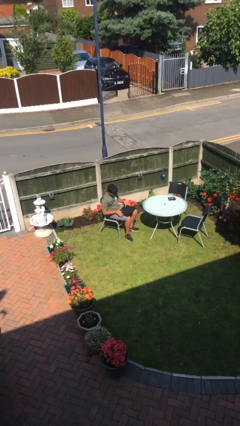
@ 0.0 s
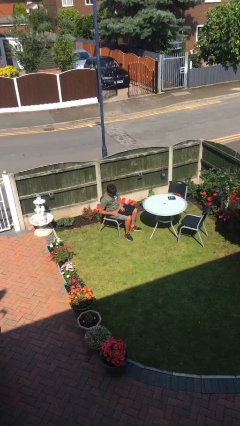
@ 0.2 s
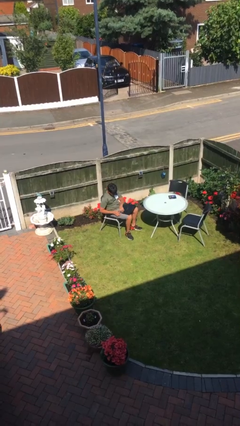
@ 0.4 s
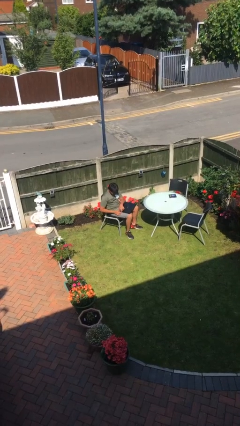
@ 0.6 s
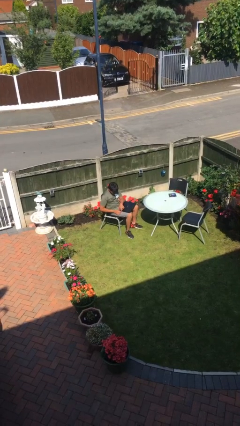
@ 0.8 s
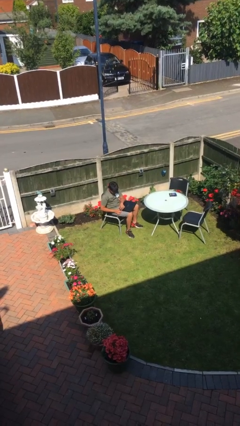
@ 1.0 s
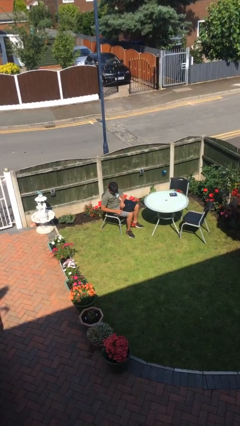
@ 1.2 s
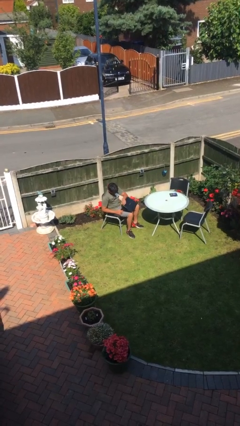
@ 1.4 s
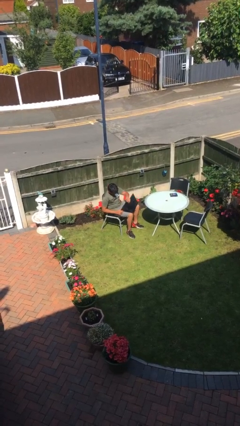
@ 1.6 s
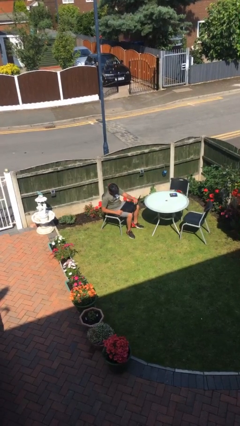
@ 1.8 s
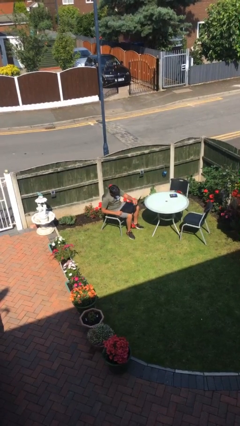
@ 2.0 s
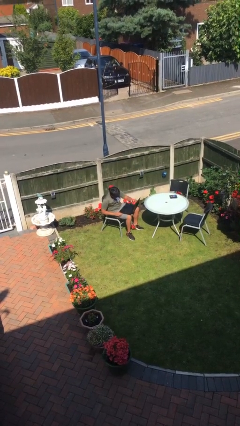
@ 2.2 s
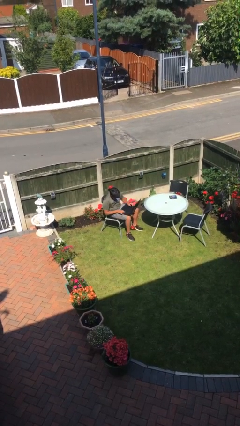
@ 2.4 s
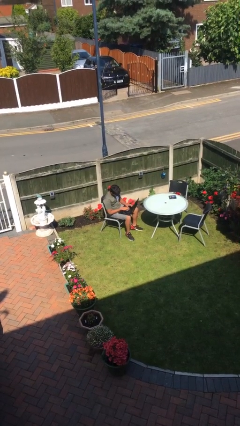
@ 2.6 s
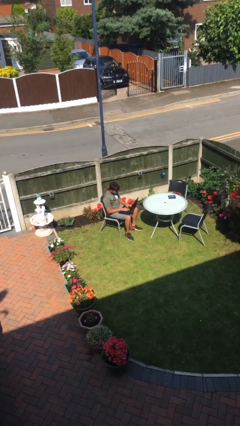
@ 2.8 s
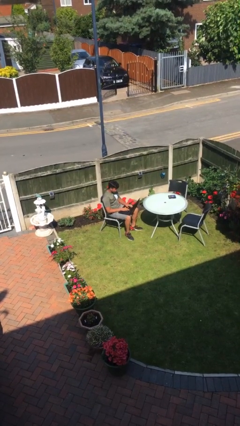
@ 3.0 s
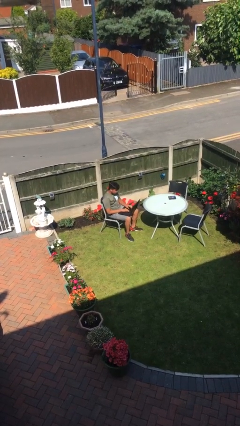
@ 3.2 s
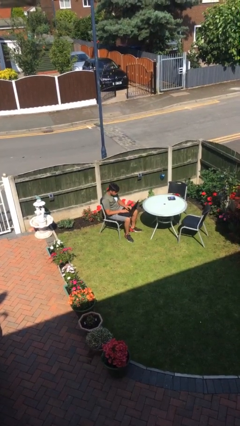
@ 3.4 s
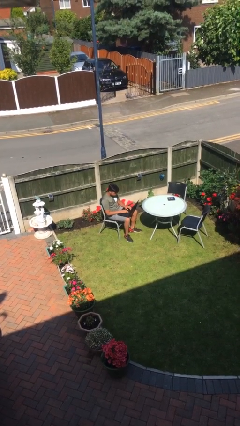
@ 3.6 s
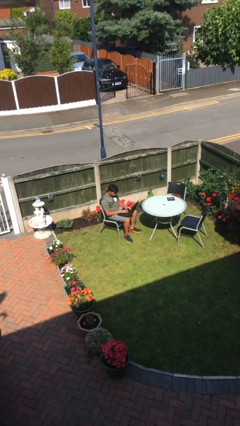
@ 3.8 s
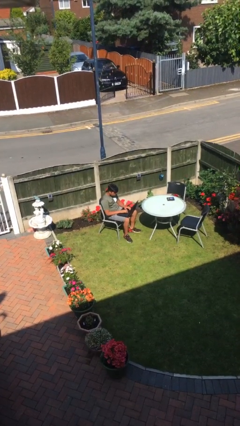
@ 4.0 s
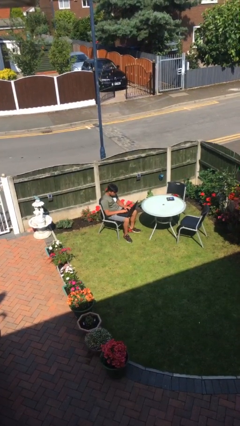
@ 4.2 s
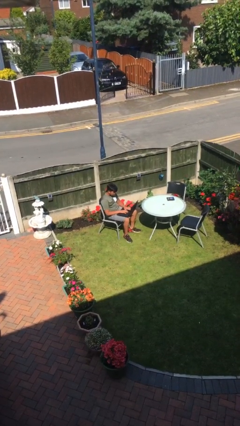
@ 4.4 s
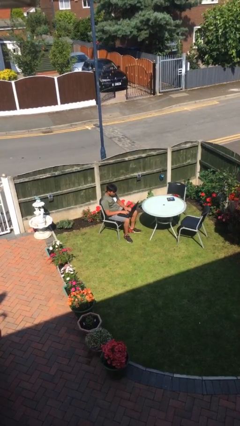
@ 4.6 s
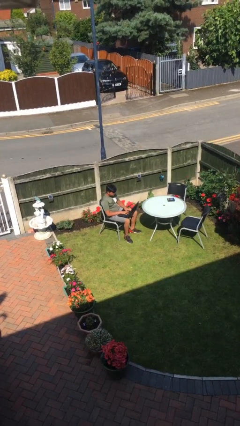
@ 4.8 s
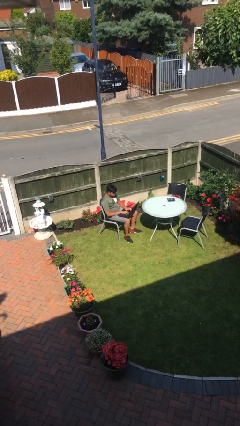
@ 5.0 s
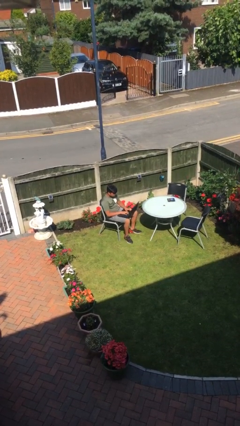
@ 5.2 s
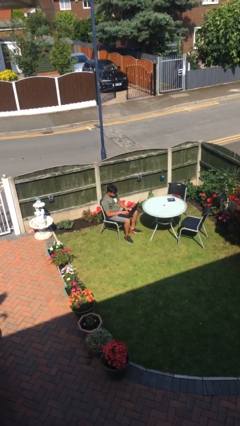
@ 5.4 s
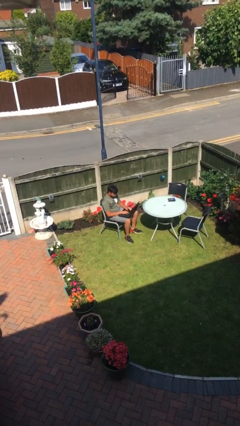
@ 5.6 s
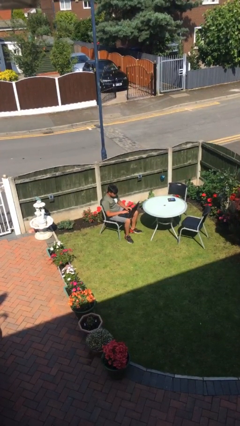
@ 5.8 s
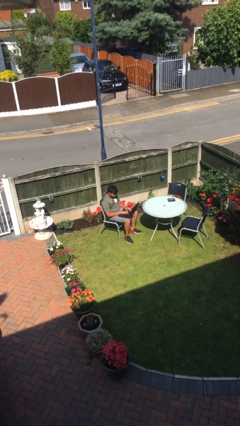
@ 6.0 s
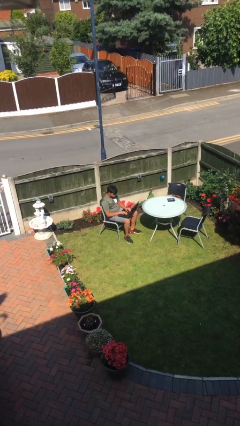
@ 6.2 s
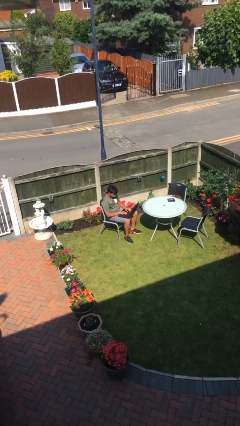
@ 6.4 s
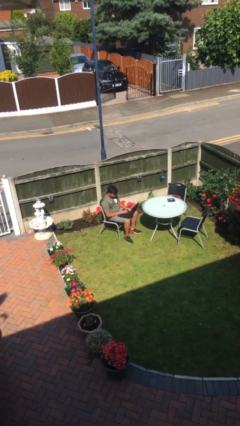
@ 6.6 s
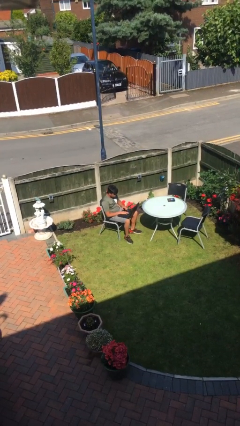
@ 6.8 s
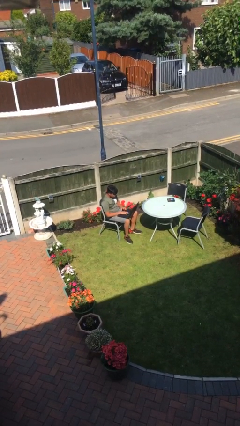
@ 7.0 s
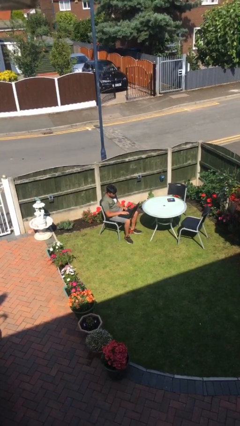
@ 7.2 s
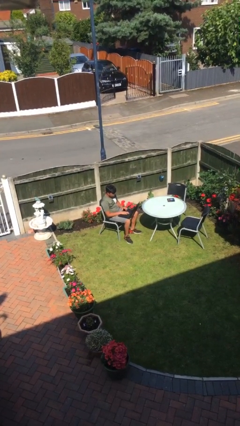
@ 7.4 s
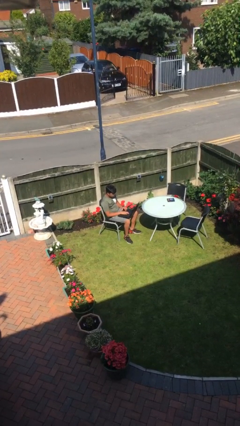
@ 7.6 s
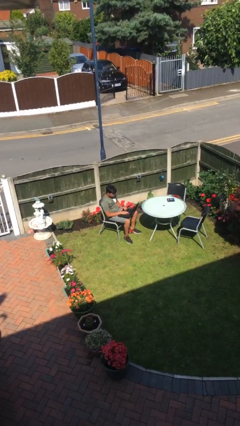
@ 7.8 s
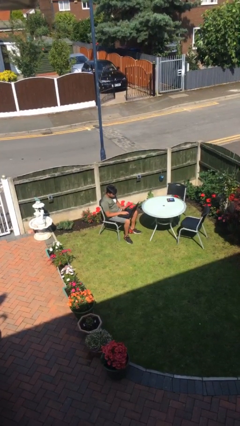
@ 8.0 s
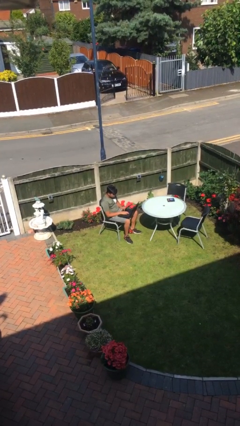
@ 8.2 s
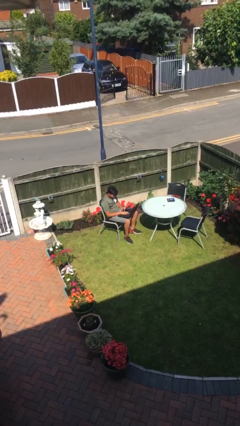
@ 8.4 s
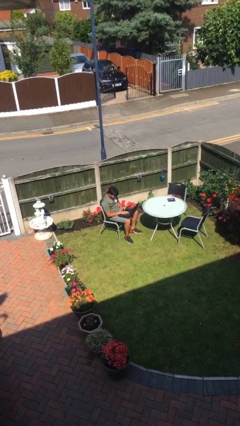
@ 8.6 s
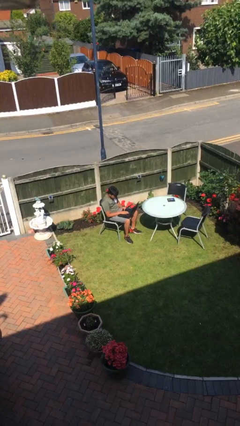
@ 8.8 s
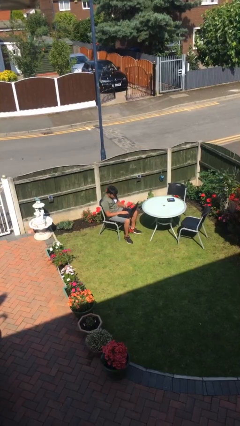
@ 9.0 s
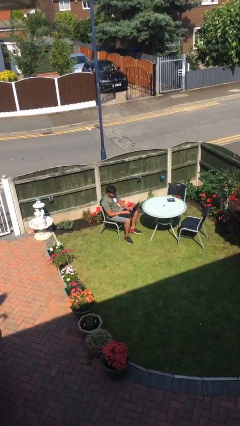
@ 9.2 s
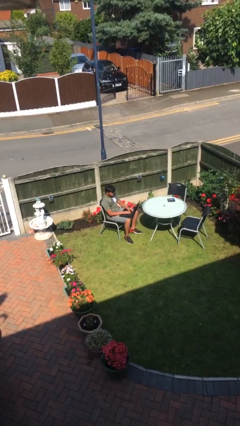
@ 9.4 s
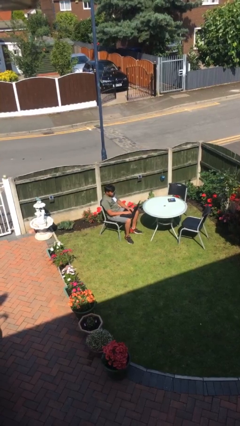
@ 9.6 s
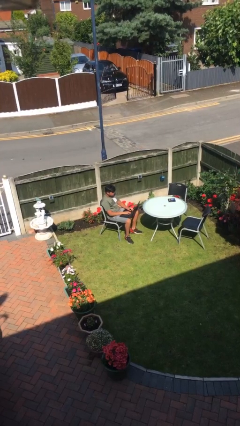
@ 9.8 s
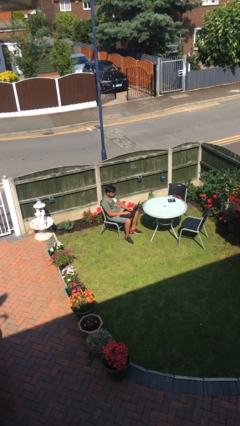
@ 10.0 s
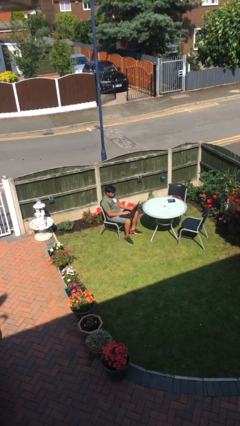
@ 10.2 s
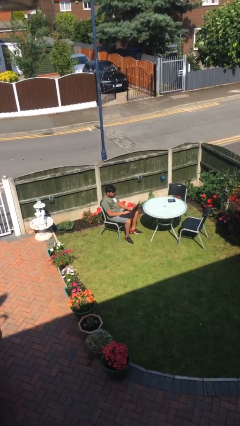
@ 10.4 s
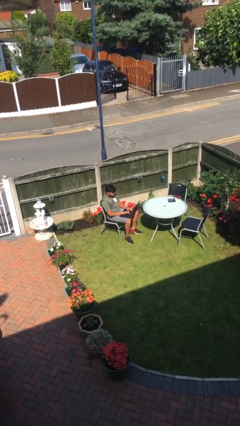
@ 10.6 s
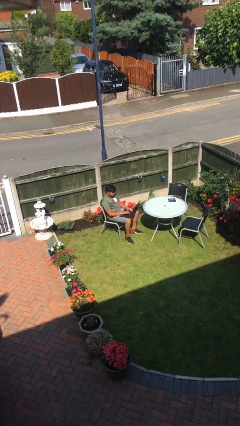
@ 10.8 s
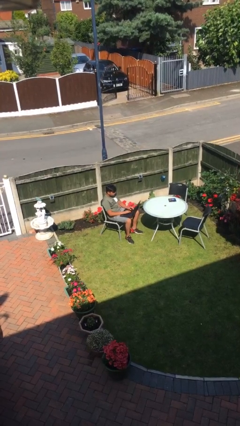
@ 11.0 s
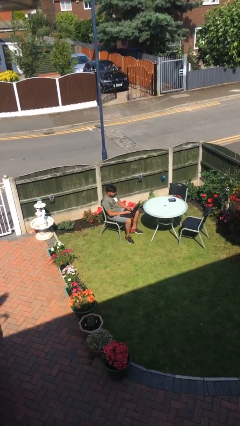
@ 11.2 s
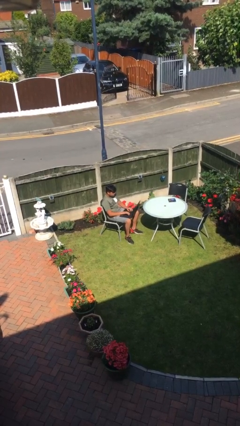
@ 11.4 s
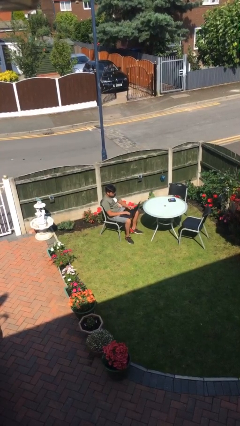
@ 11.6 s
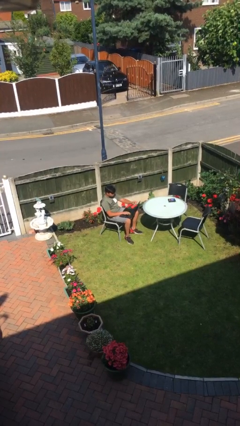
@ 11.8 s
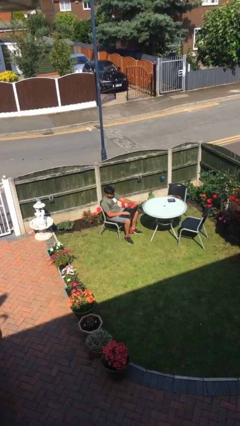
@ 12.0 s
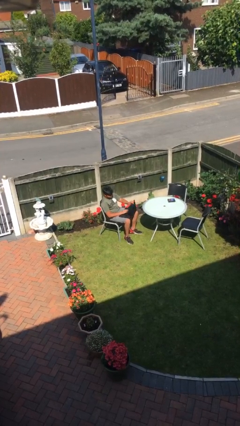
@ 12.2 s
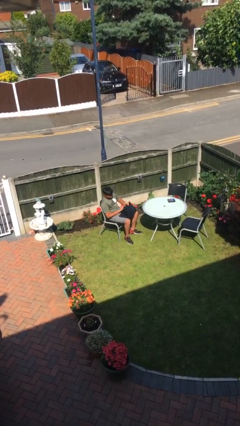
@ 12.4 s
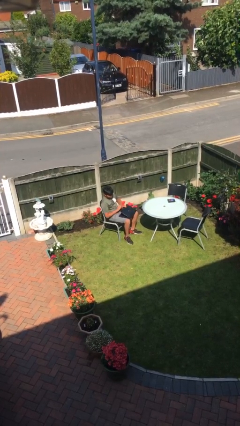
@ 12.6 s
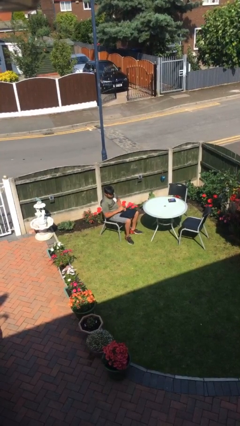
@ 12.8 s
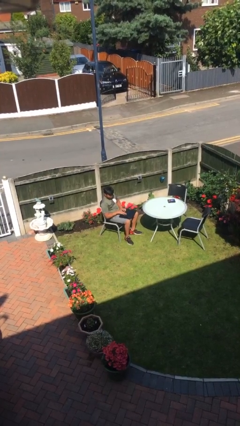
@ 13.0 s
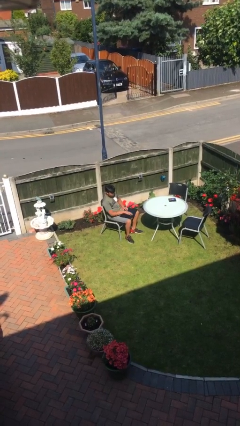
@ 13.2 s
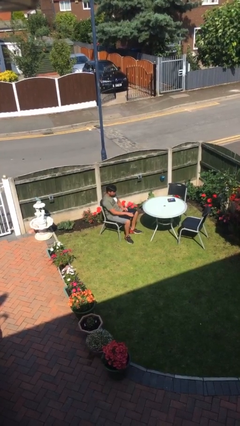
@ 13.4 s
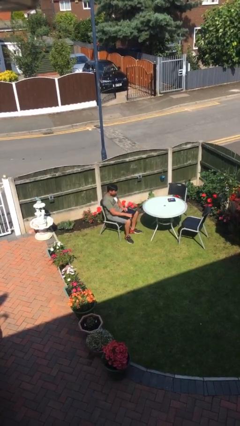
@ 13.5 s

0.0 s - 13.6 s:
person interacts with laptop

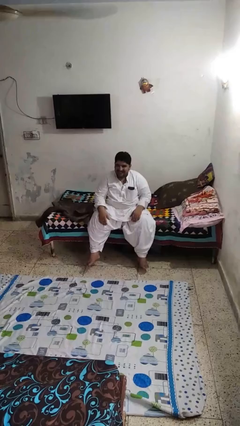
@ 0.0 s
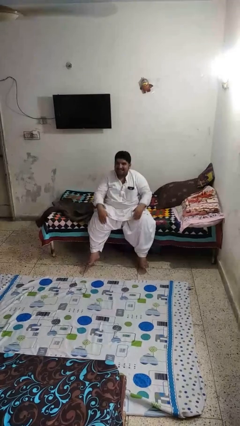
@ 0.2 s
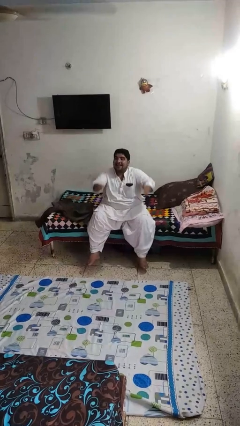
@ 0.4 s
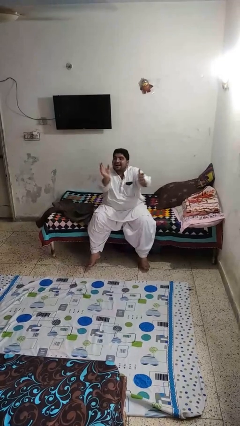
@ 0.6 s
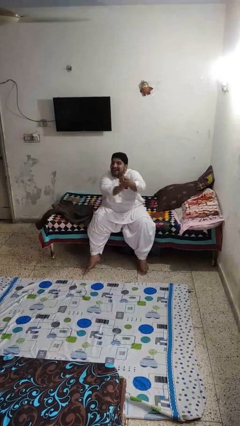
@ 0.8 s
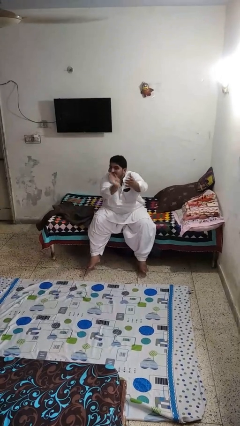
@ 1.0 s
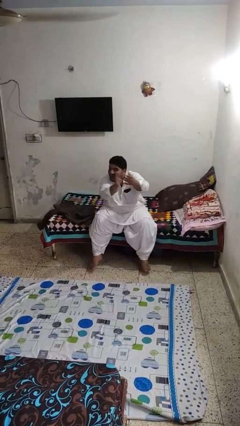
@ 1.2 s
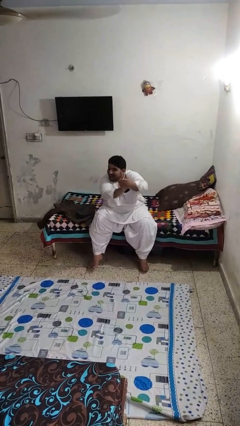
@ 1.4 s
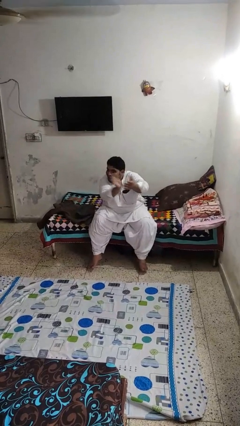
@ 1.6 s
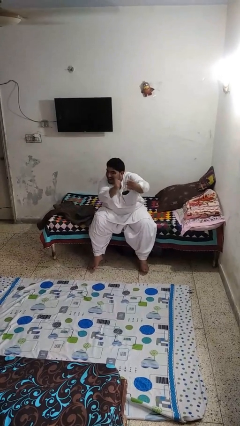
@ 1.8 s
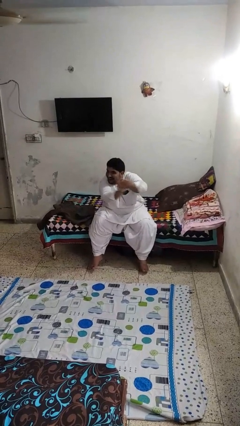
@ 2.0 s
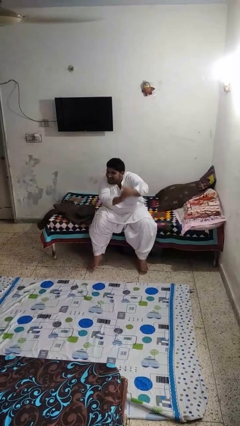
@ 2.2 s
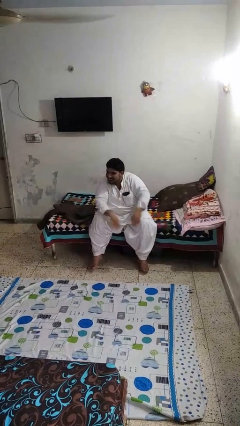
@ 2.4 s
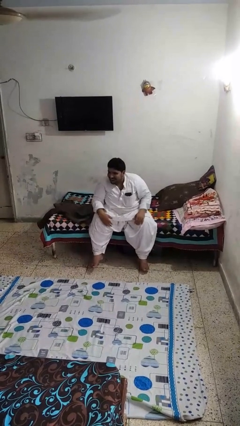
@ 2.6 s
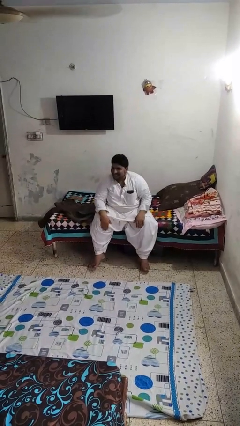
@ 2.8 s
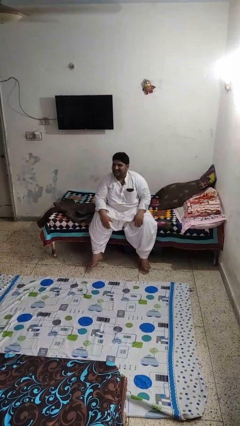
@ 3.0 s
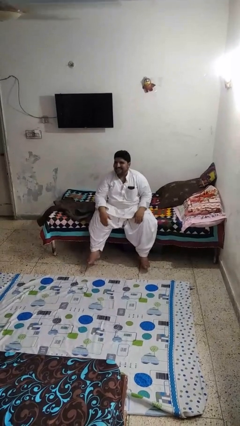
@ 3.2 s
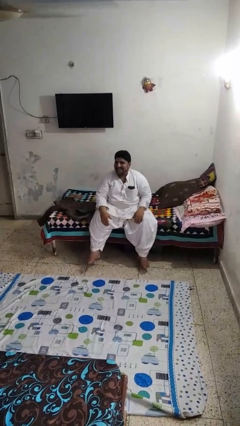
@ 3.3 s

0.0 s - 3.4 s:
person claps hands

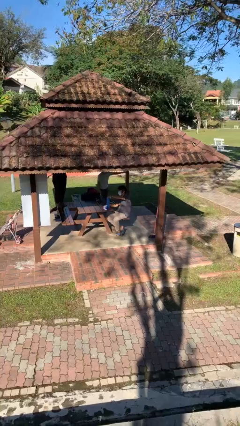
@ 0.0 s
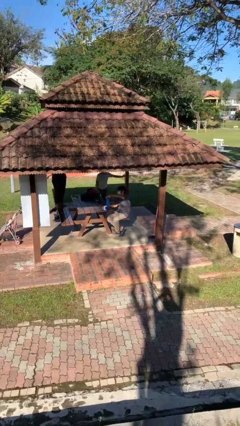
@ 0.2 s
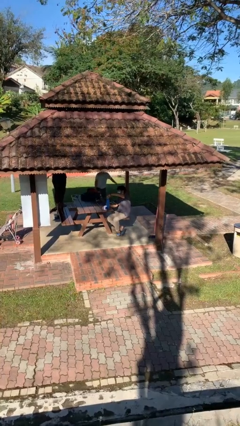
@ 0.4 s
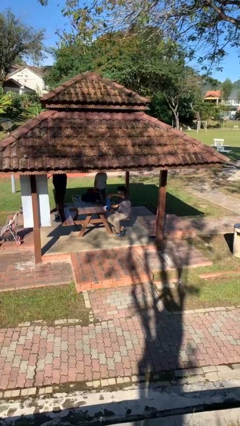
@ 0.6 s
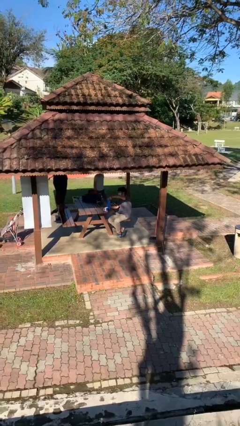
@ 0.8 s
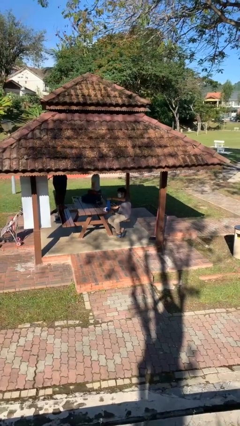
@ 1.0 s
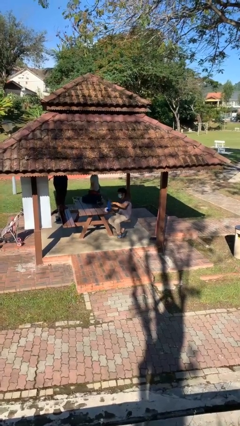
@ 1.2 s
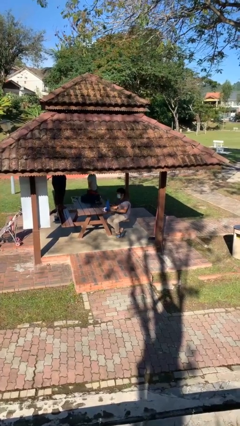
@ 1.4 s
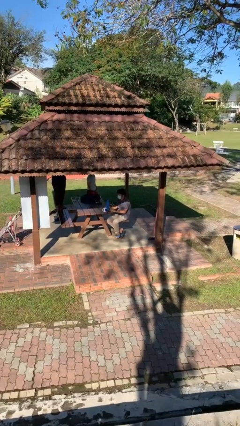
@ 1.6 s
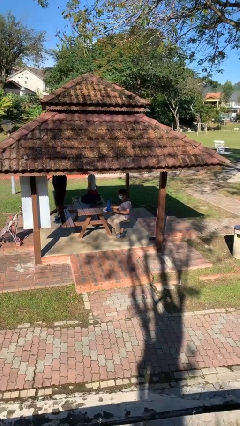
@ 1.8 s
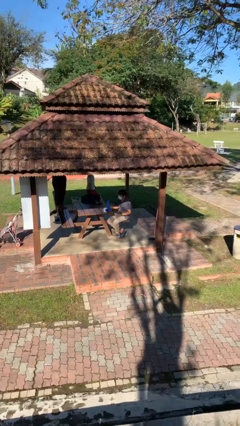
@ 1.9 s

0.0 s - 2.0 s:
person unscrews lid from bottle
